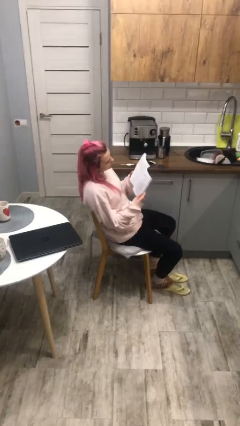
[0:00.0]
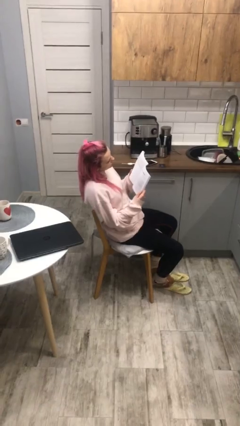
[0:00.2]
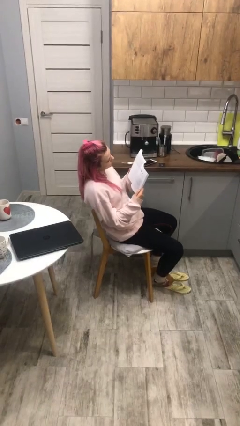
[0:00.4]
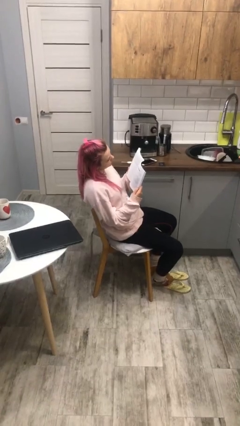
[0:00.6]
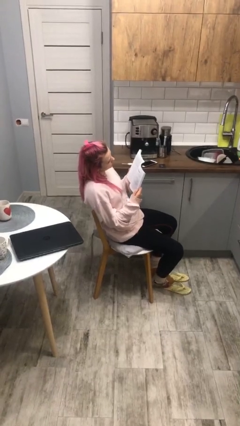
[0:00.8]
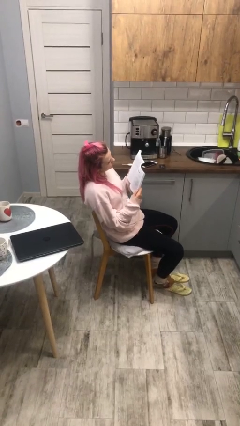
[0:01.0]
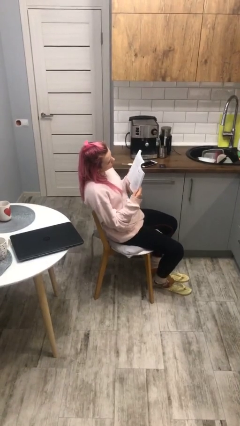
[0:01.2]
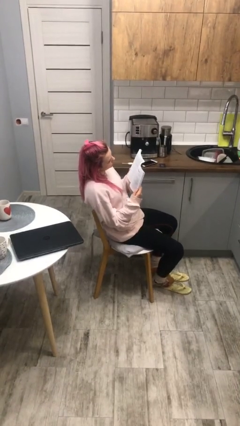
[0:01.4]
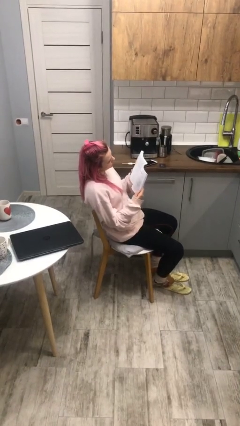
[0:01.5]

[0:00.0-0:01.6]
person reads document

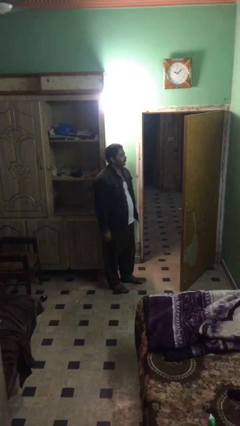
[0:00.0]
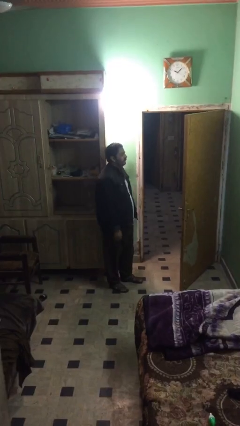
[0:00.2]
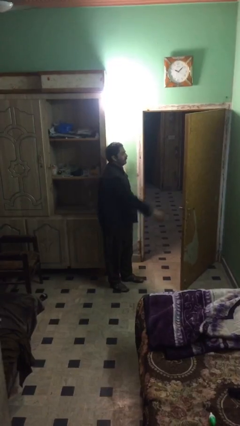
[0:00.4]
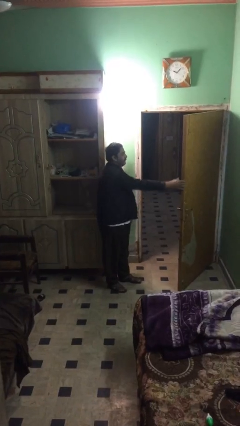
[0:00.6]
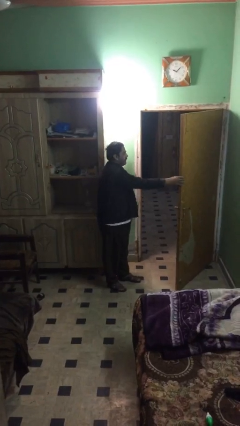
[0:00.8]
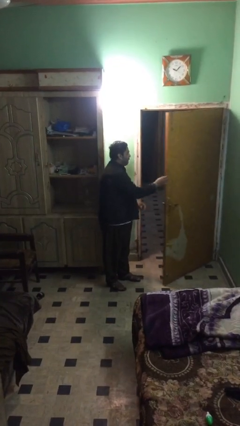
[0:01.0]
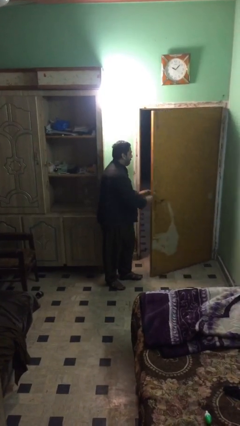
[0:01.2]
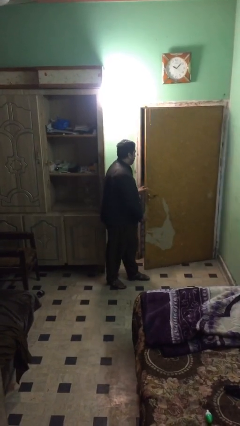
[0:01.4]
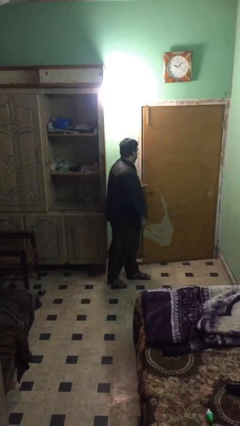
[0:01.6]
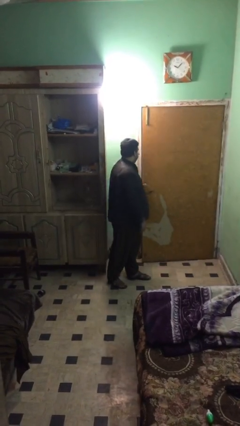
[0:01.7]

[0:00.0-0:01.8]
person closes facility door

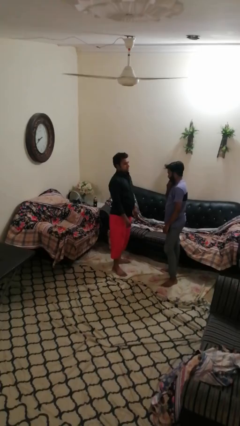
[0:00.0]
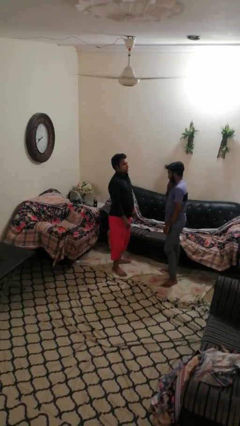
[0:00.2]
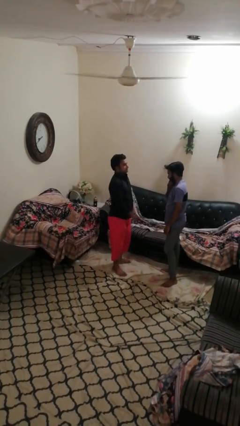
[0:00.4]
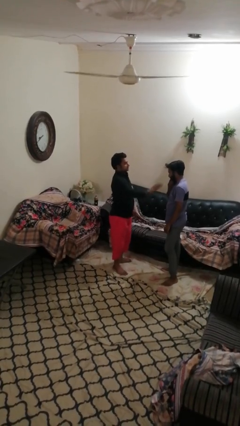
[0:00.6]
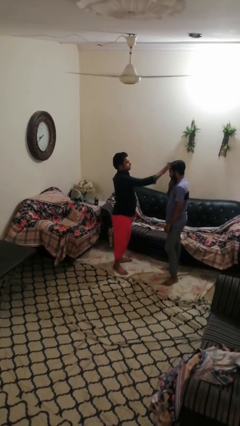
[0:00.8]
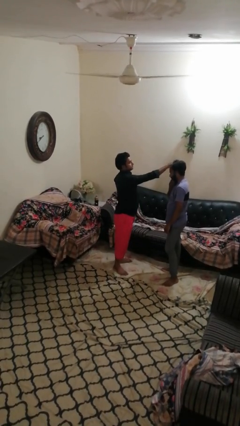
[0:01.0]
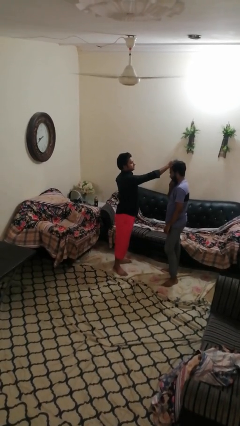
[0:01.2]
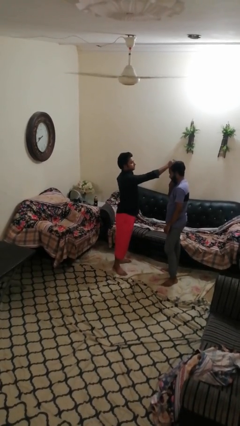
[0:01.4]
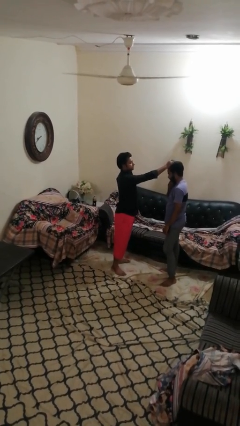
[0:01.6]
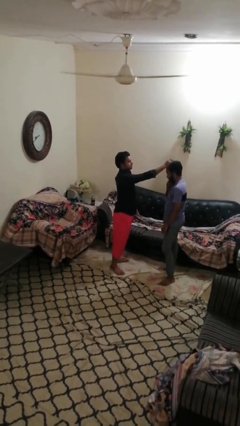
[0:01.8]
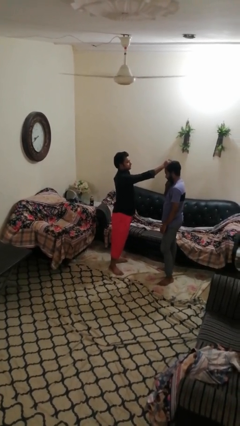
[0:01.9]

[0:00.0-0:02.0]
person grabs person by hair

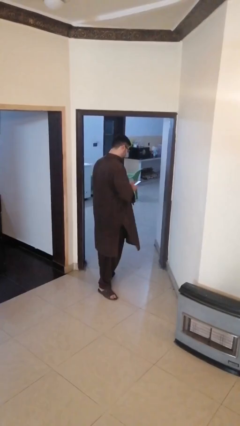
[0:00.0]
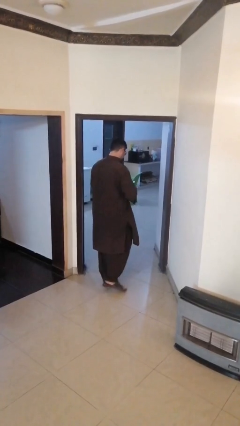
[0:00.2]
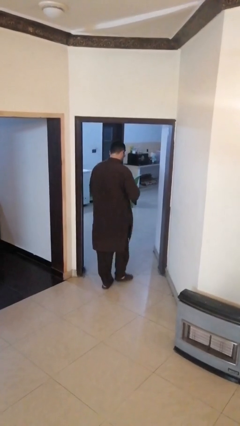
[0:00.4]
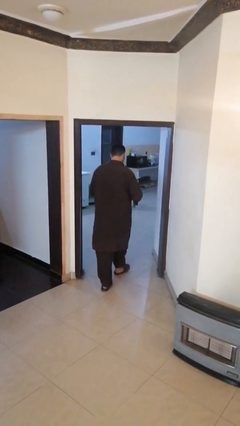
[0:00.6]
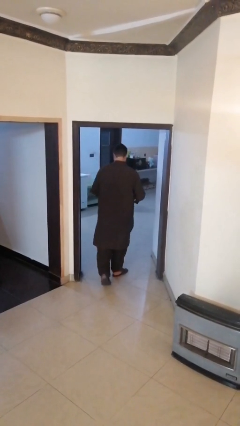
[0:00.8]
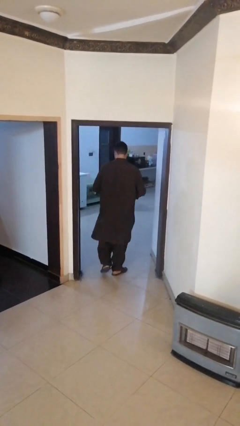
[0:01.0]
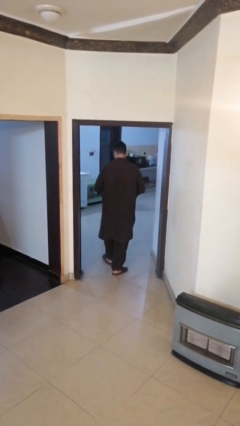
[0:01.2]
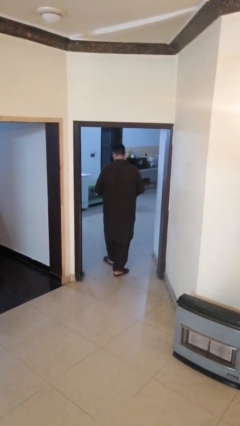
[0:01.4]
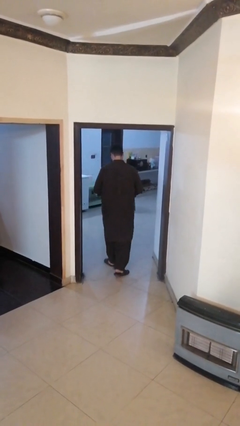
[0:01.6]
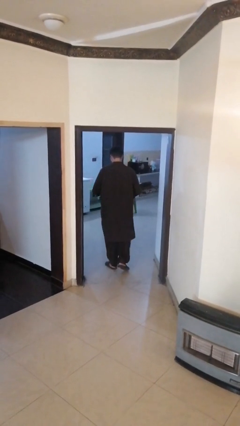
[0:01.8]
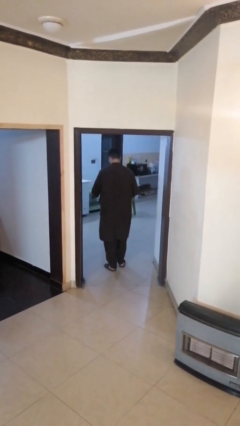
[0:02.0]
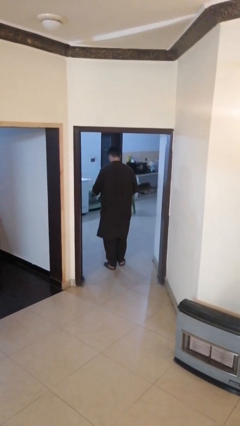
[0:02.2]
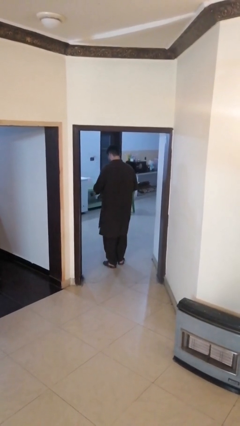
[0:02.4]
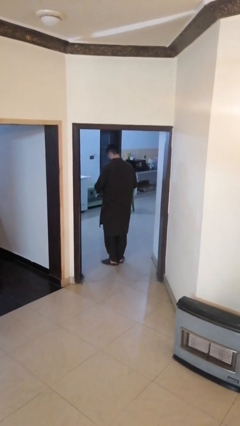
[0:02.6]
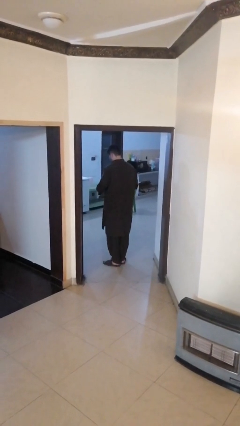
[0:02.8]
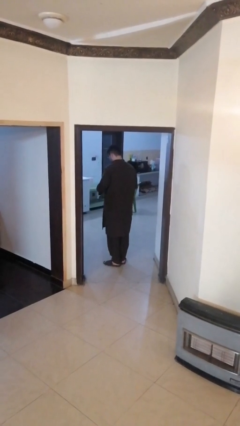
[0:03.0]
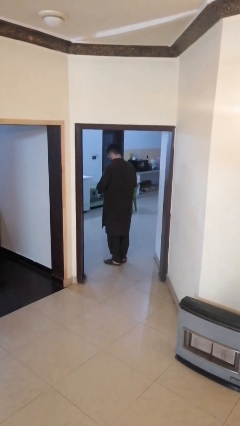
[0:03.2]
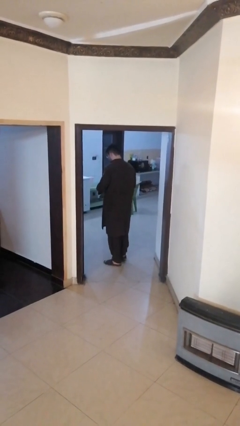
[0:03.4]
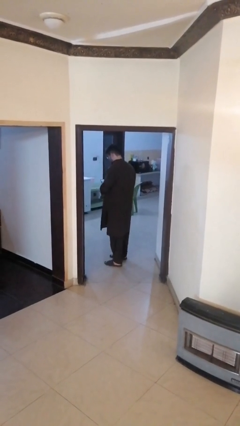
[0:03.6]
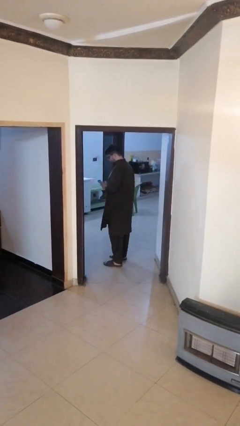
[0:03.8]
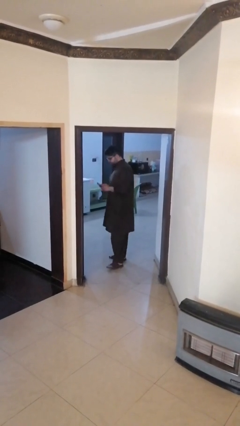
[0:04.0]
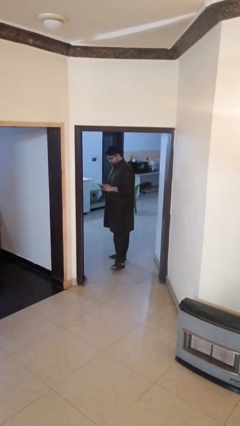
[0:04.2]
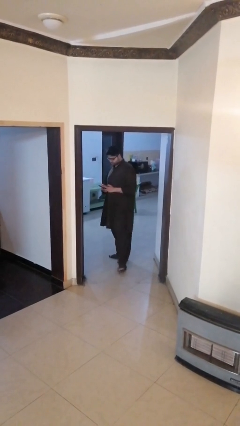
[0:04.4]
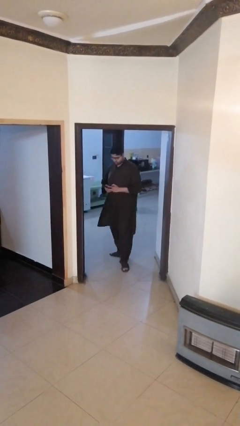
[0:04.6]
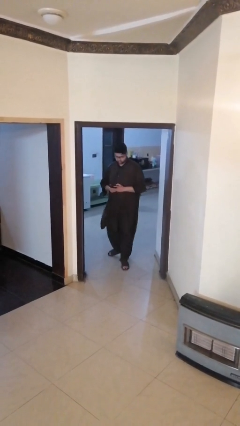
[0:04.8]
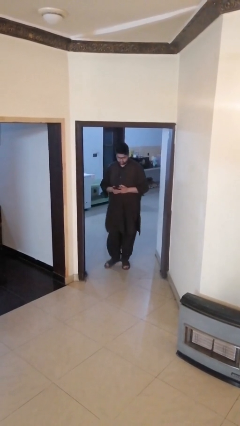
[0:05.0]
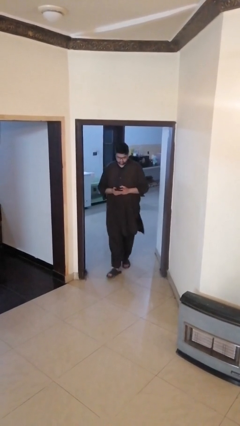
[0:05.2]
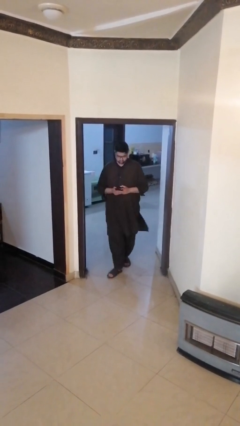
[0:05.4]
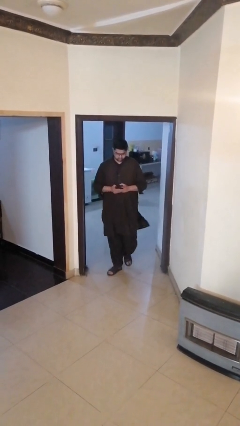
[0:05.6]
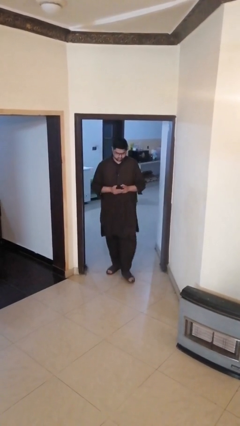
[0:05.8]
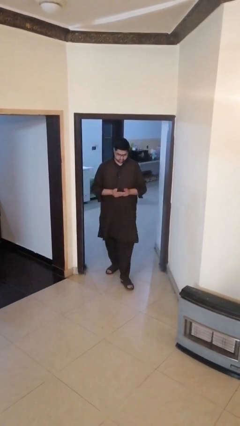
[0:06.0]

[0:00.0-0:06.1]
person exits scene through structure

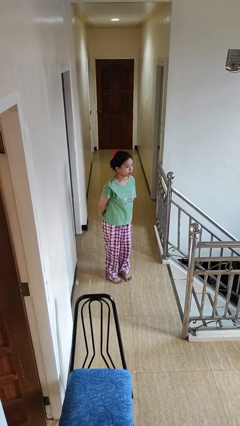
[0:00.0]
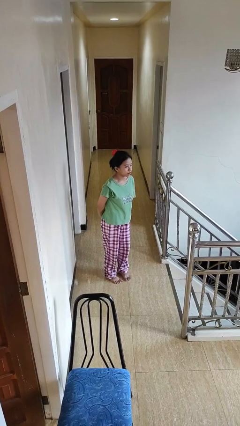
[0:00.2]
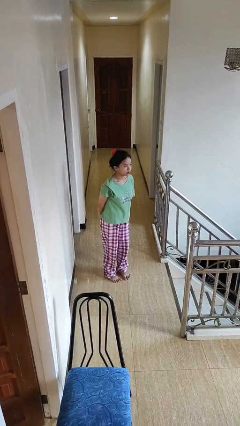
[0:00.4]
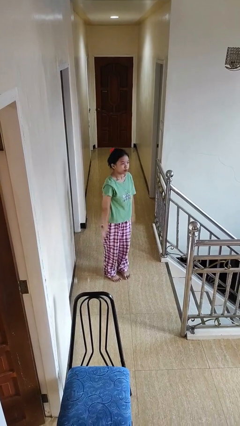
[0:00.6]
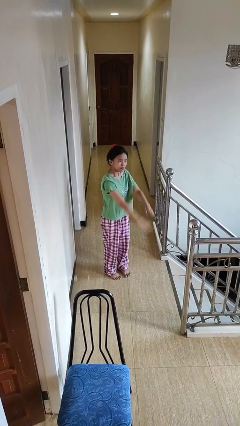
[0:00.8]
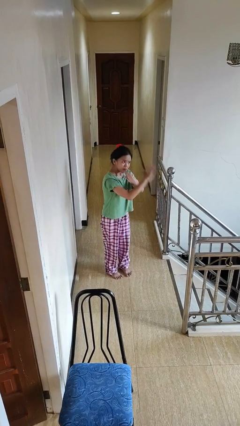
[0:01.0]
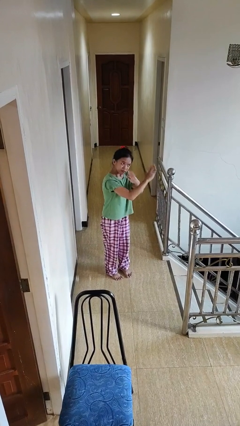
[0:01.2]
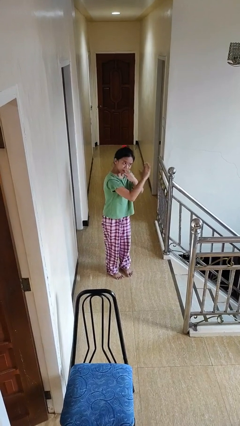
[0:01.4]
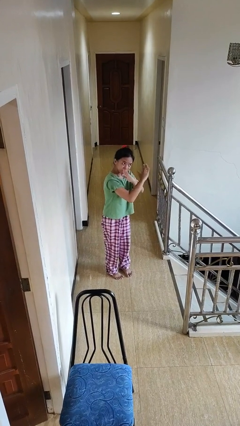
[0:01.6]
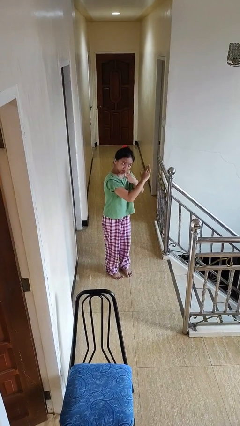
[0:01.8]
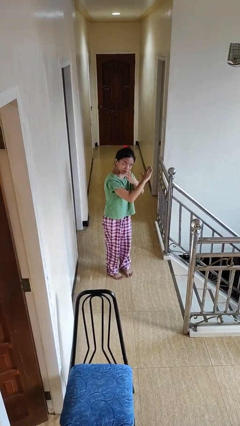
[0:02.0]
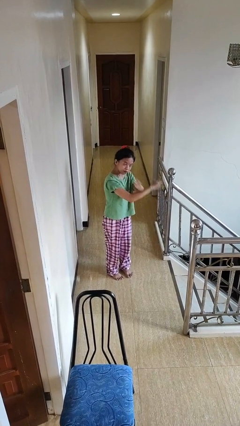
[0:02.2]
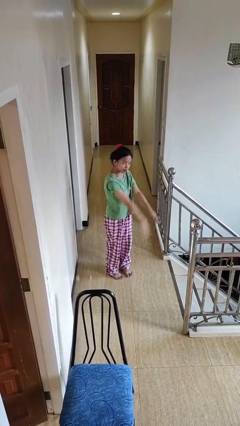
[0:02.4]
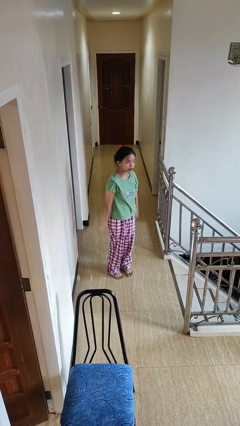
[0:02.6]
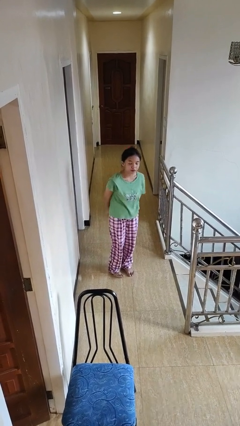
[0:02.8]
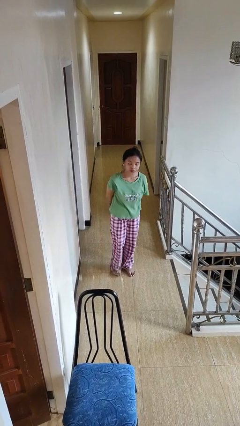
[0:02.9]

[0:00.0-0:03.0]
person gestures arms x

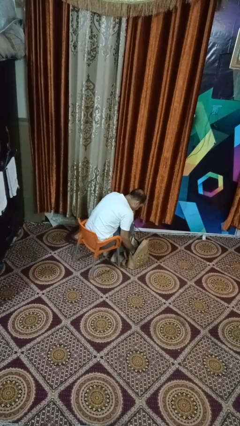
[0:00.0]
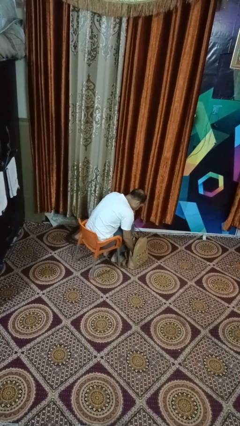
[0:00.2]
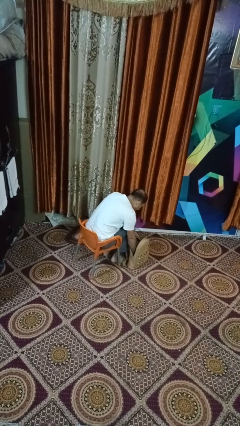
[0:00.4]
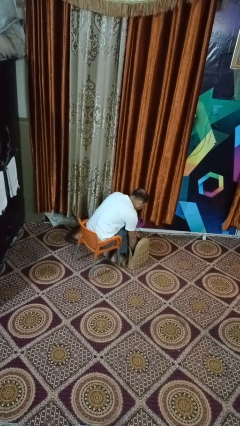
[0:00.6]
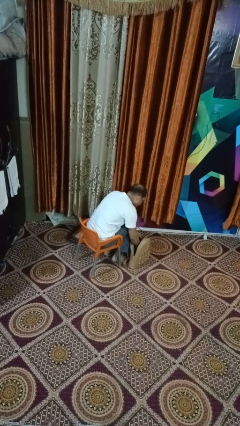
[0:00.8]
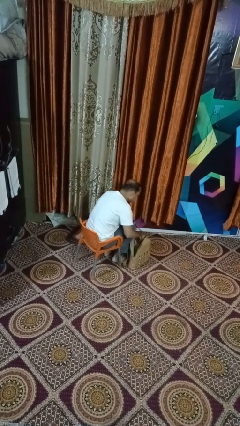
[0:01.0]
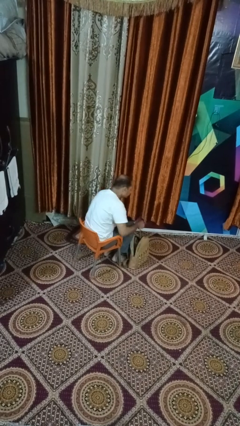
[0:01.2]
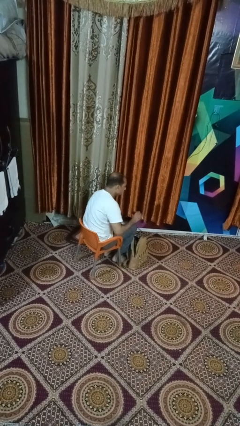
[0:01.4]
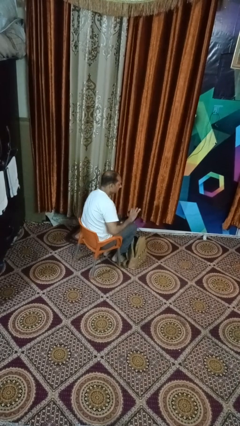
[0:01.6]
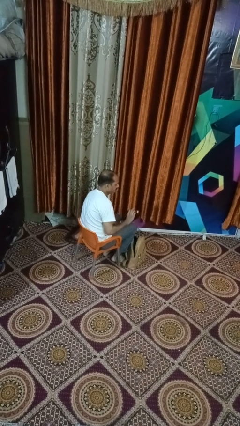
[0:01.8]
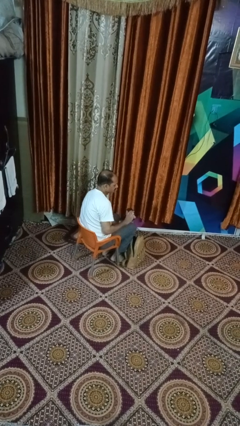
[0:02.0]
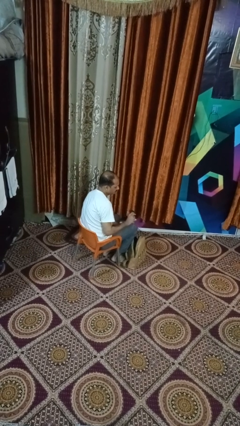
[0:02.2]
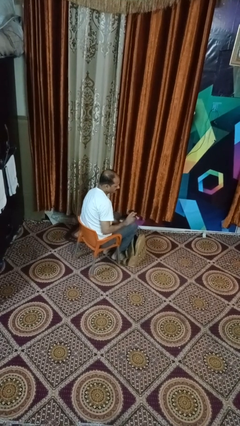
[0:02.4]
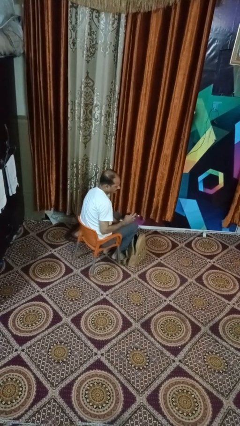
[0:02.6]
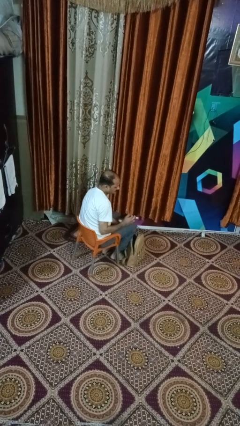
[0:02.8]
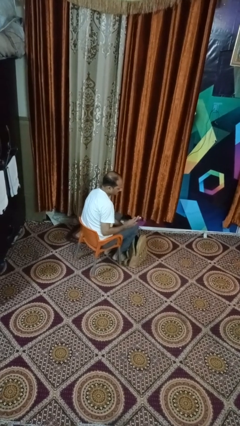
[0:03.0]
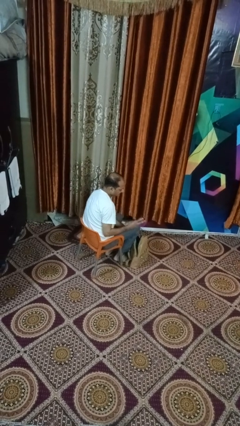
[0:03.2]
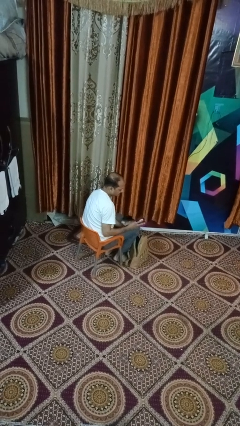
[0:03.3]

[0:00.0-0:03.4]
person takes object from purse
